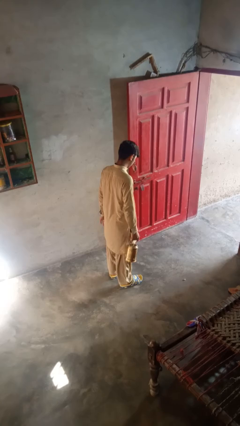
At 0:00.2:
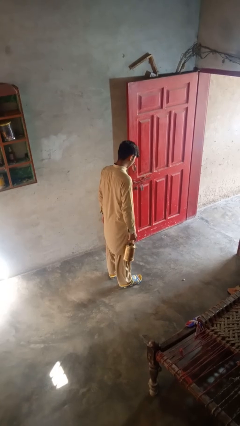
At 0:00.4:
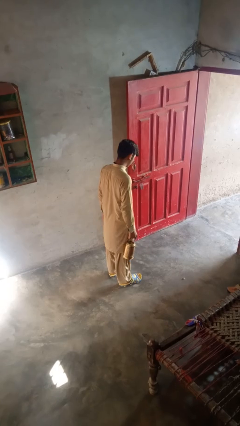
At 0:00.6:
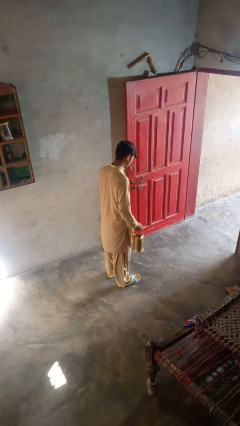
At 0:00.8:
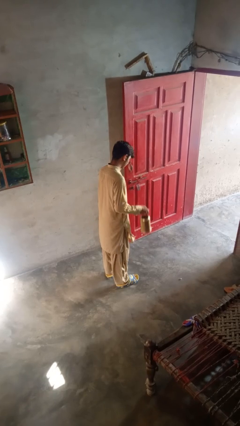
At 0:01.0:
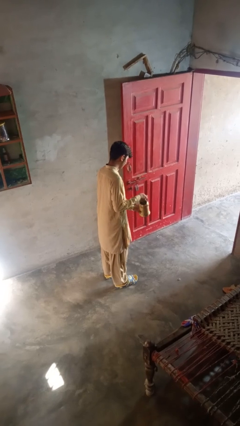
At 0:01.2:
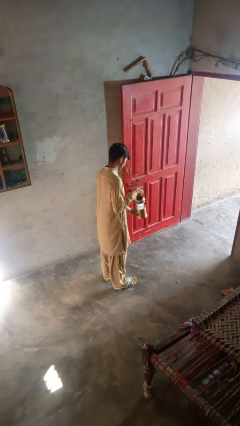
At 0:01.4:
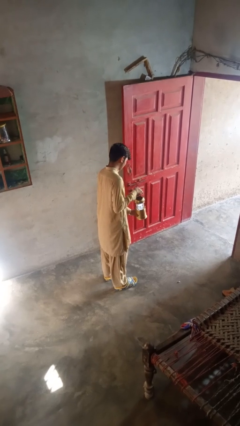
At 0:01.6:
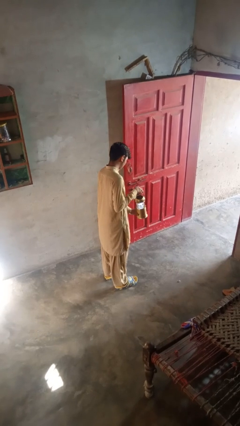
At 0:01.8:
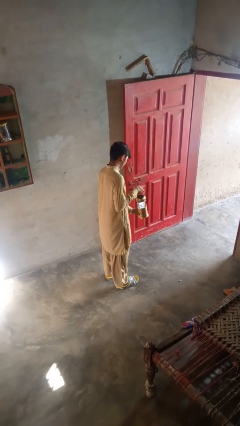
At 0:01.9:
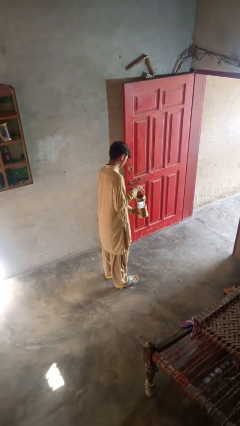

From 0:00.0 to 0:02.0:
person turns on lamp

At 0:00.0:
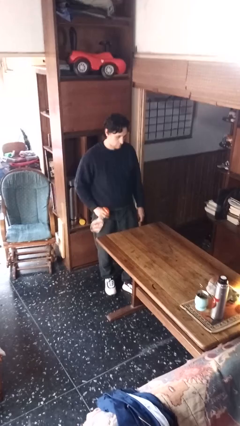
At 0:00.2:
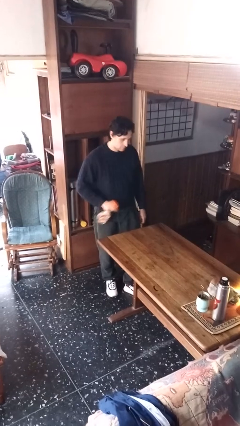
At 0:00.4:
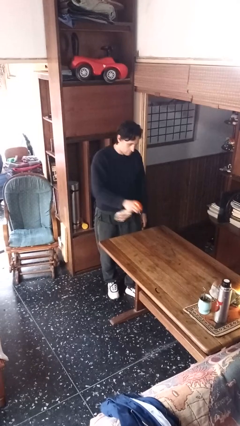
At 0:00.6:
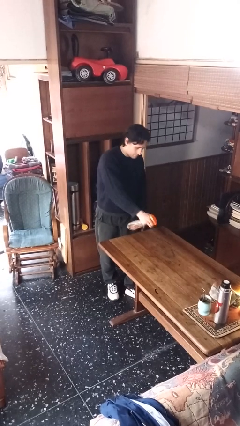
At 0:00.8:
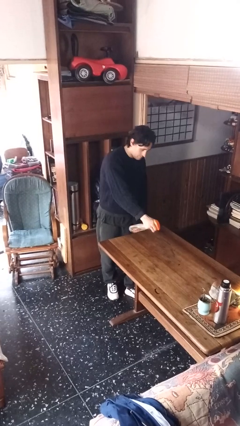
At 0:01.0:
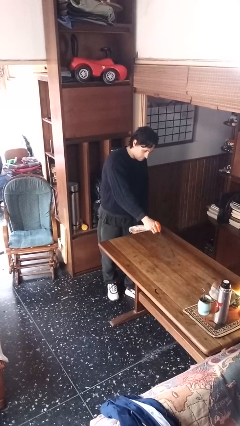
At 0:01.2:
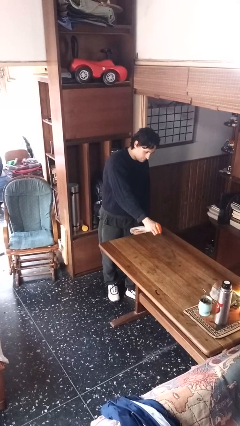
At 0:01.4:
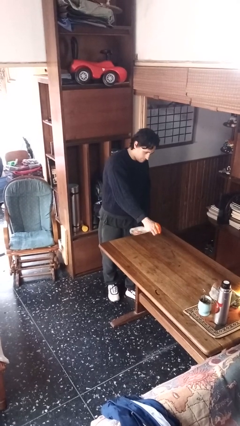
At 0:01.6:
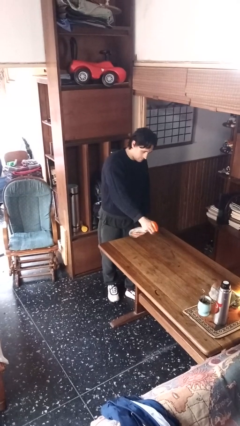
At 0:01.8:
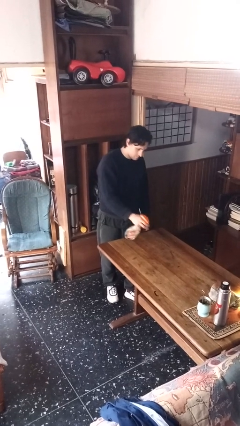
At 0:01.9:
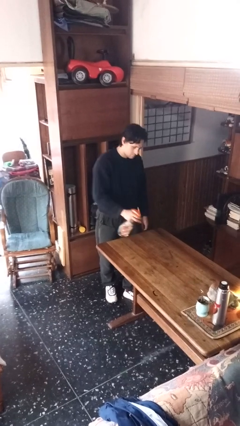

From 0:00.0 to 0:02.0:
person sprays from bottle

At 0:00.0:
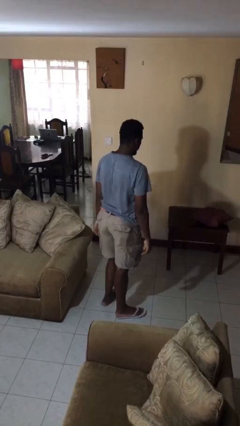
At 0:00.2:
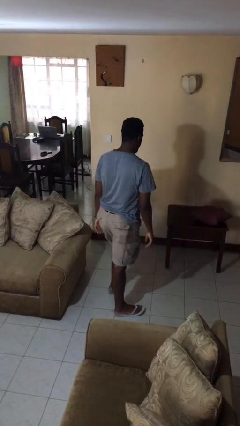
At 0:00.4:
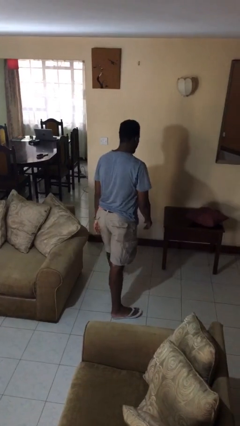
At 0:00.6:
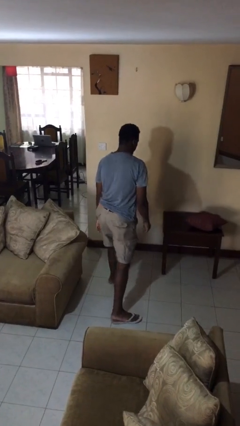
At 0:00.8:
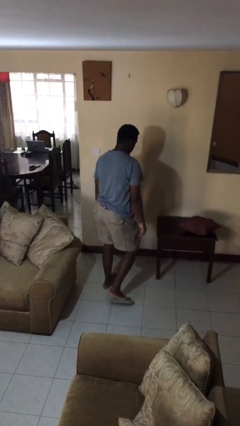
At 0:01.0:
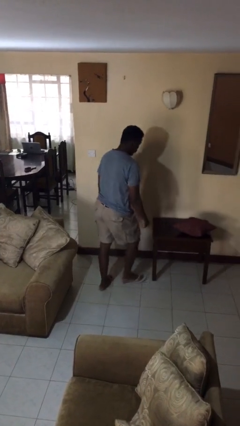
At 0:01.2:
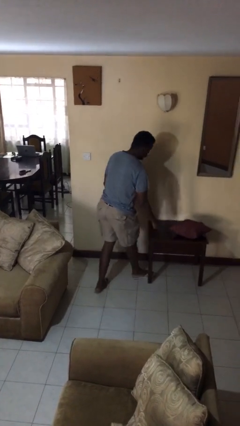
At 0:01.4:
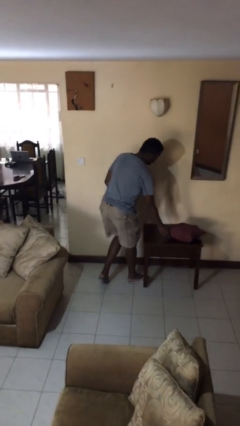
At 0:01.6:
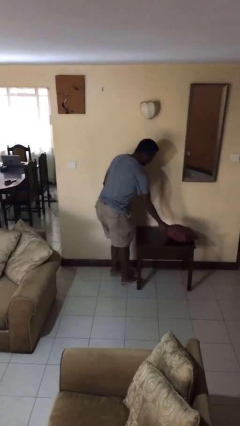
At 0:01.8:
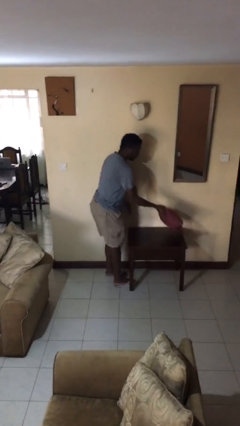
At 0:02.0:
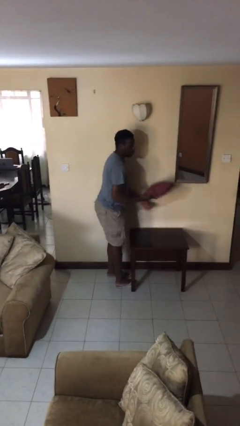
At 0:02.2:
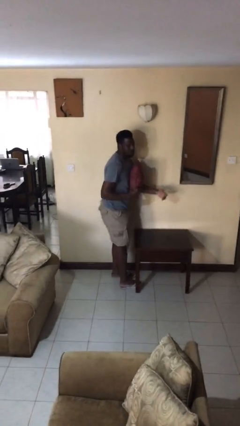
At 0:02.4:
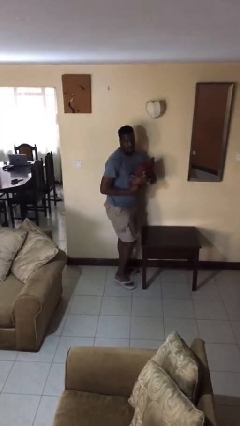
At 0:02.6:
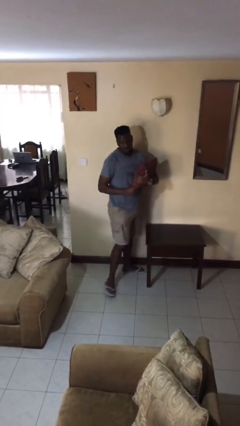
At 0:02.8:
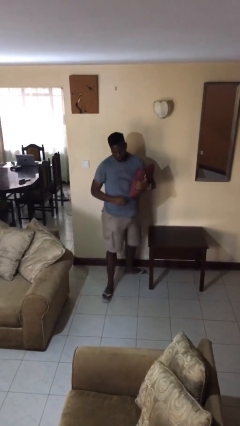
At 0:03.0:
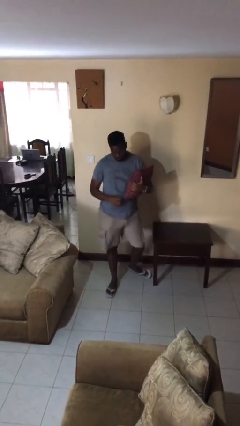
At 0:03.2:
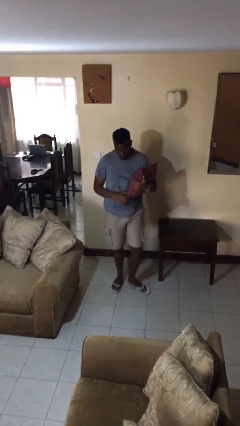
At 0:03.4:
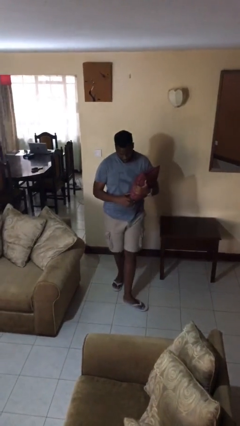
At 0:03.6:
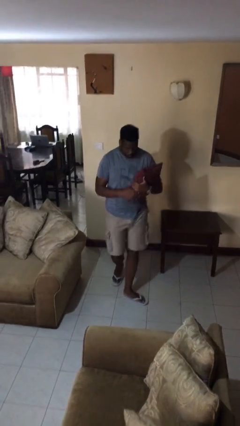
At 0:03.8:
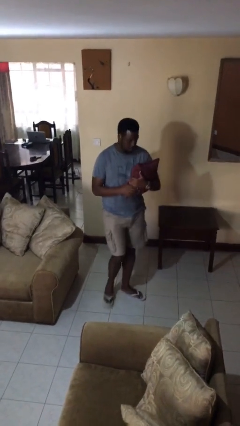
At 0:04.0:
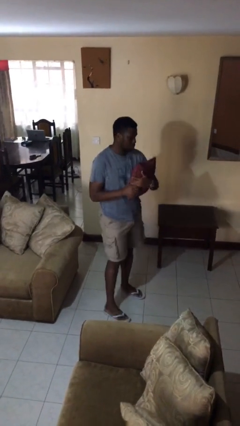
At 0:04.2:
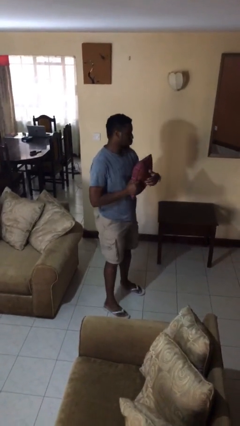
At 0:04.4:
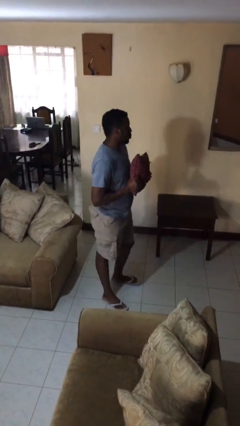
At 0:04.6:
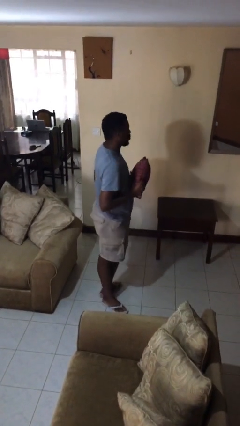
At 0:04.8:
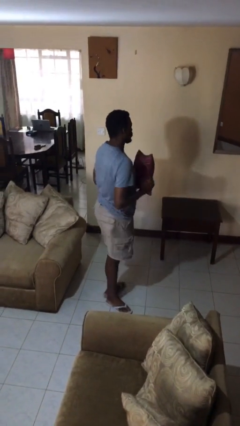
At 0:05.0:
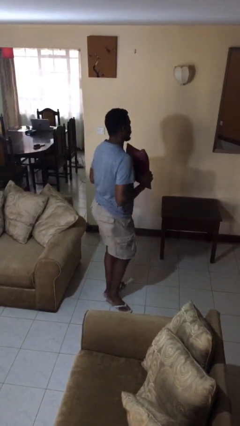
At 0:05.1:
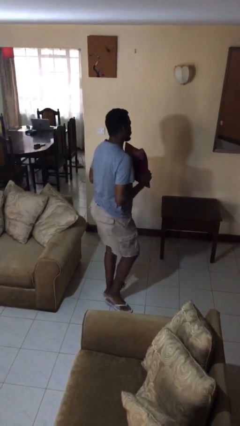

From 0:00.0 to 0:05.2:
person picks up object from table

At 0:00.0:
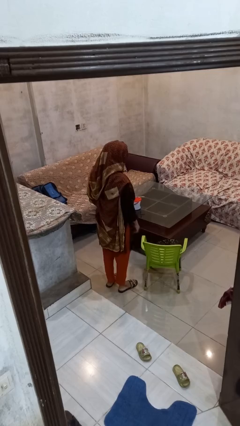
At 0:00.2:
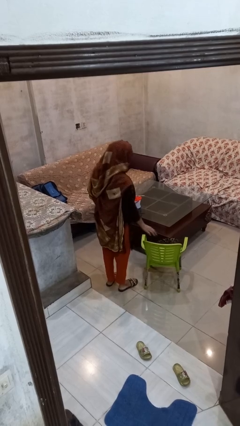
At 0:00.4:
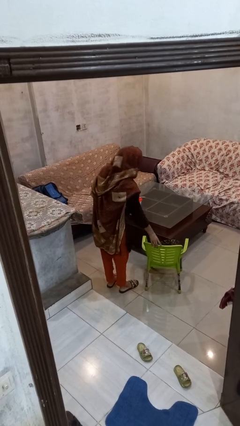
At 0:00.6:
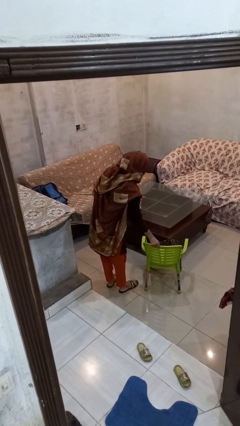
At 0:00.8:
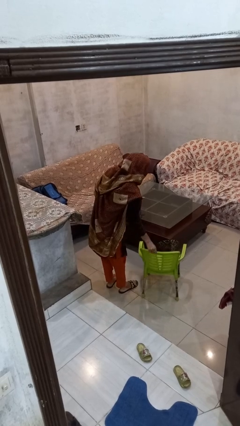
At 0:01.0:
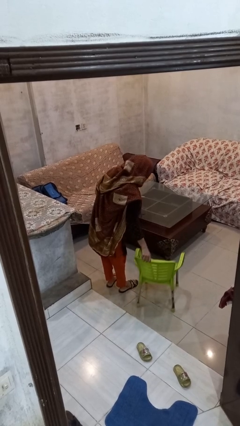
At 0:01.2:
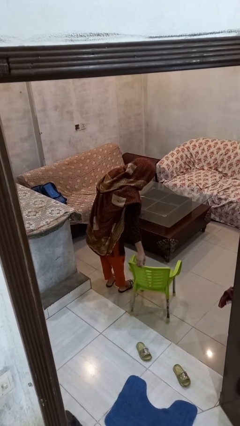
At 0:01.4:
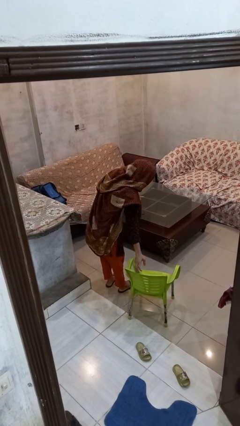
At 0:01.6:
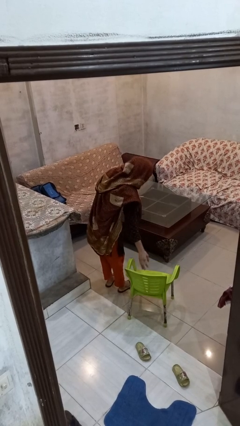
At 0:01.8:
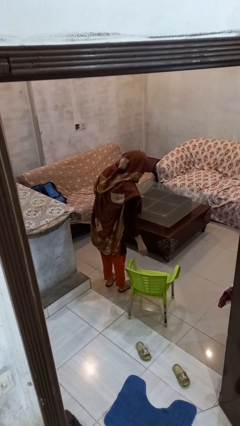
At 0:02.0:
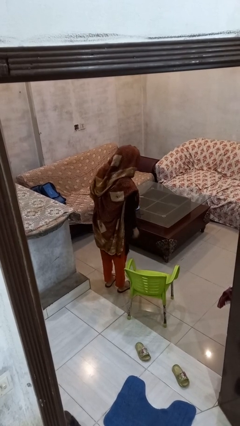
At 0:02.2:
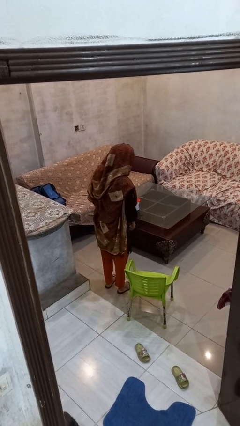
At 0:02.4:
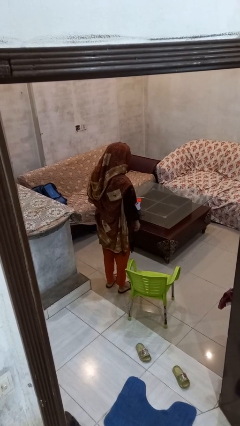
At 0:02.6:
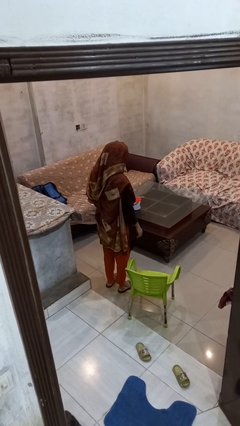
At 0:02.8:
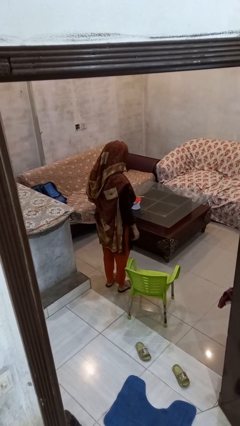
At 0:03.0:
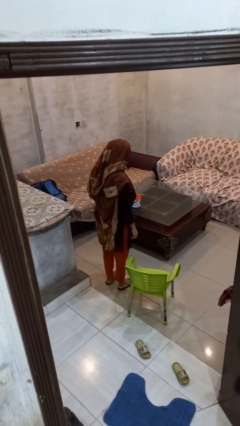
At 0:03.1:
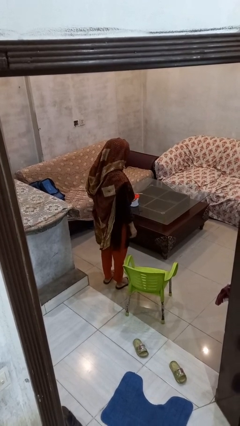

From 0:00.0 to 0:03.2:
person pulls out chair

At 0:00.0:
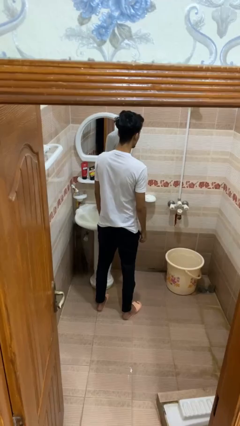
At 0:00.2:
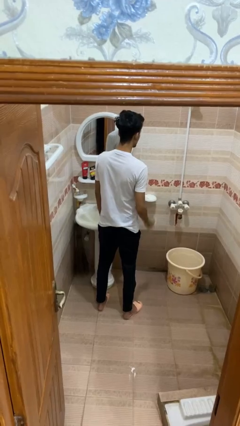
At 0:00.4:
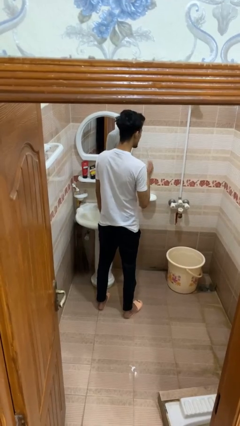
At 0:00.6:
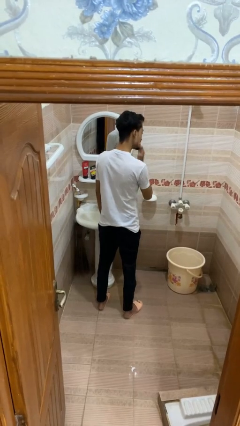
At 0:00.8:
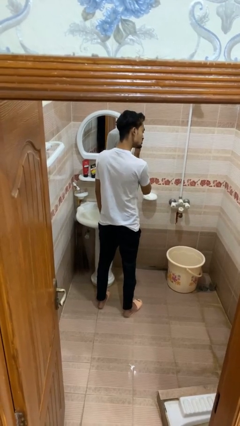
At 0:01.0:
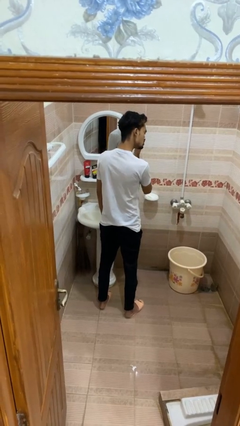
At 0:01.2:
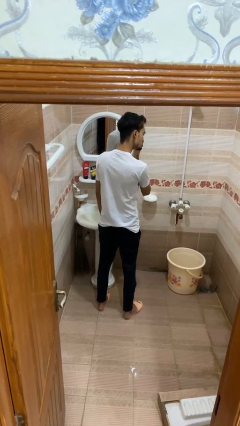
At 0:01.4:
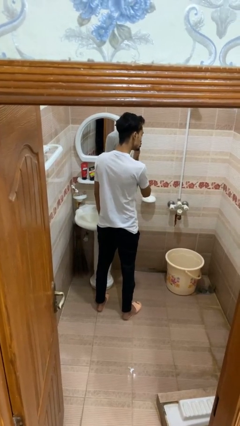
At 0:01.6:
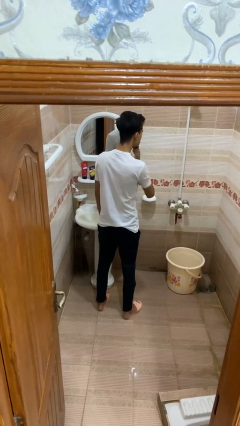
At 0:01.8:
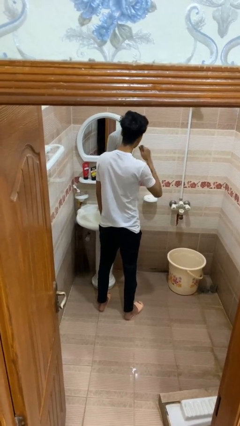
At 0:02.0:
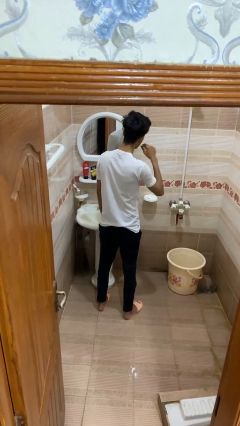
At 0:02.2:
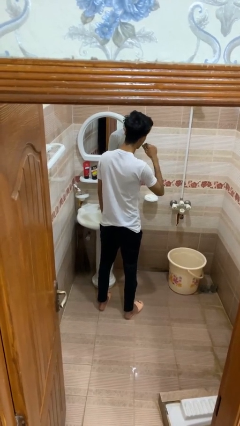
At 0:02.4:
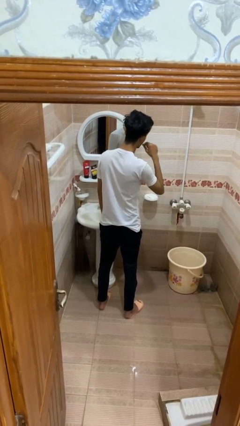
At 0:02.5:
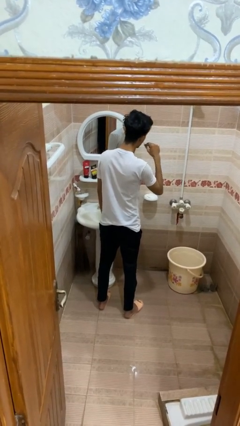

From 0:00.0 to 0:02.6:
person brushes teeth

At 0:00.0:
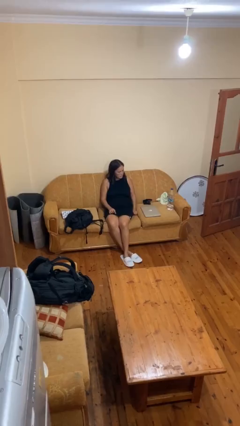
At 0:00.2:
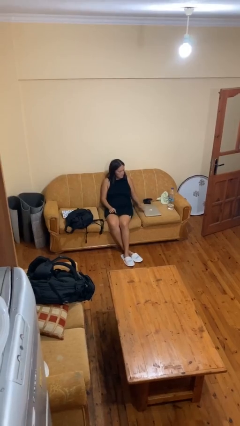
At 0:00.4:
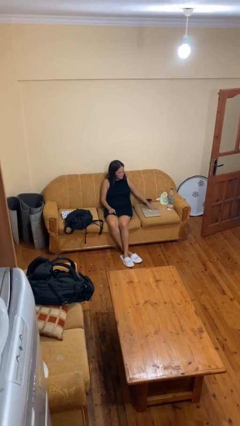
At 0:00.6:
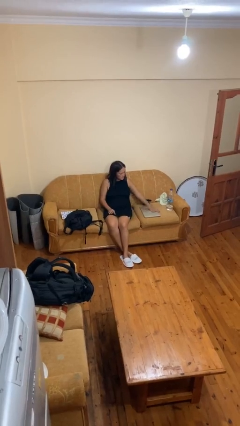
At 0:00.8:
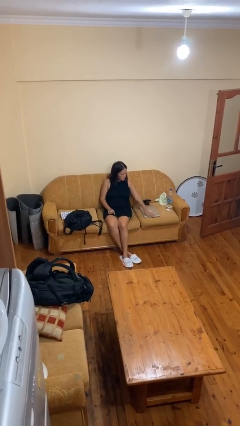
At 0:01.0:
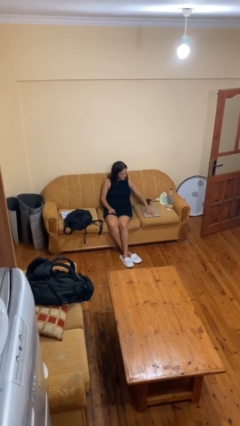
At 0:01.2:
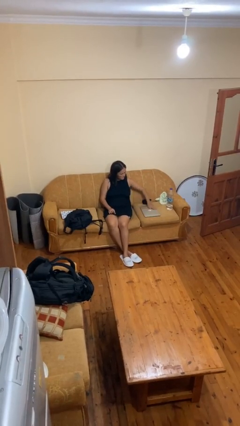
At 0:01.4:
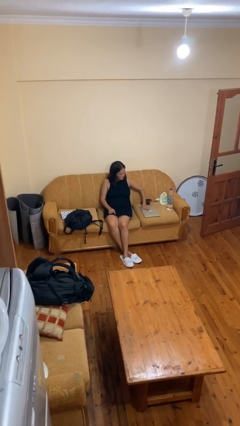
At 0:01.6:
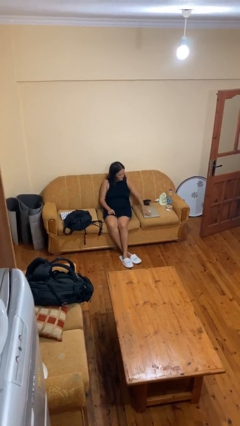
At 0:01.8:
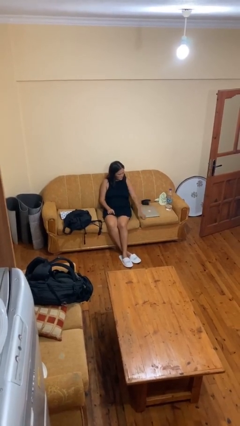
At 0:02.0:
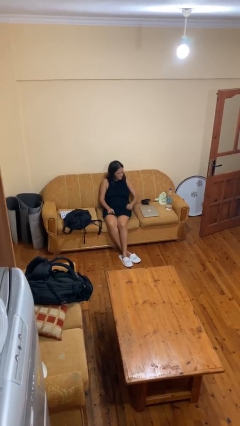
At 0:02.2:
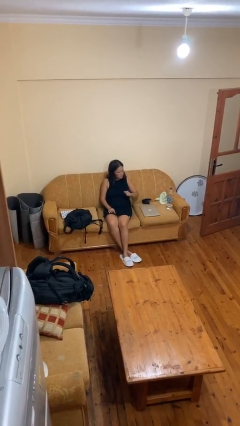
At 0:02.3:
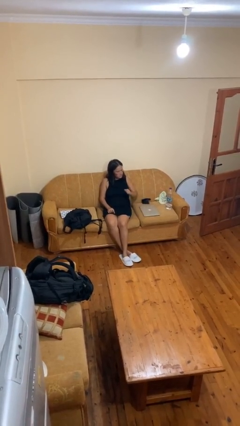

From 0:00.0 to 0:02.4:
person waves hand over object
